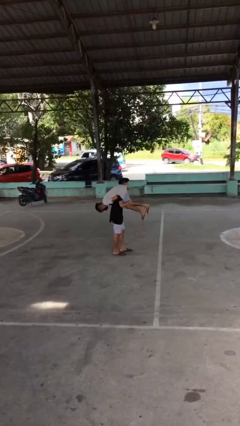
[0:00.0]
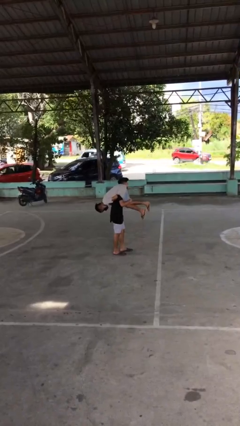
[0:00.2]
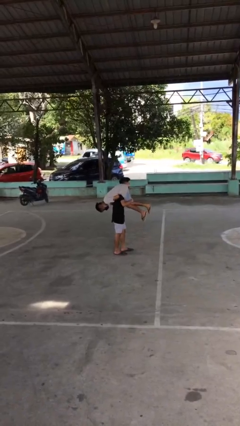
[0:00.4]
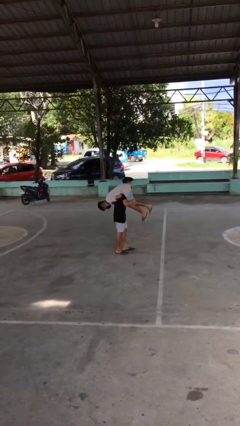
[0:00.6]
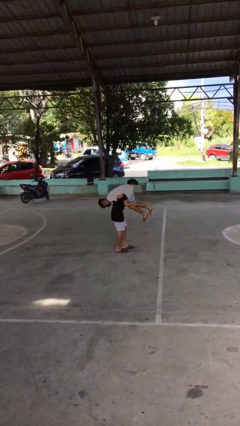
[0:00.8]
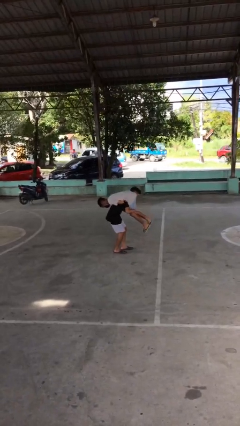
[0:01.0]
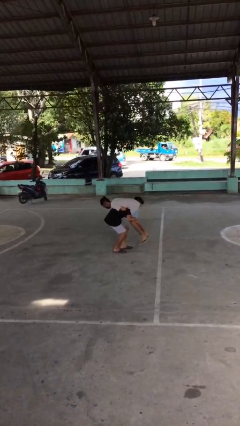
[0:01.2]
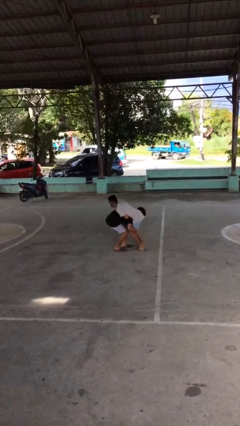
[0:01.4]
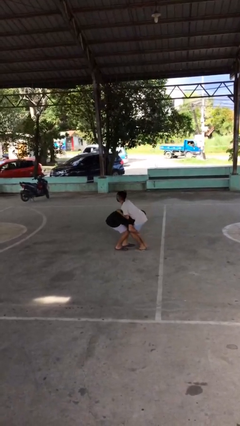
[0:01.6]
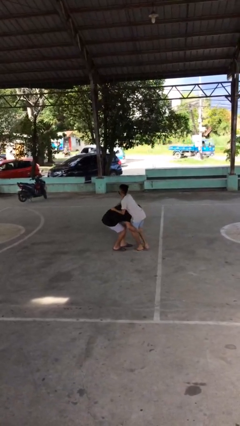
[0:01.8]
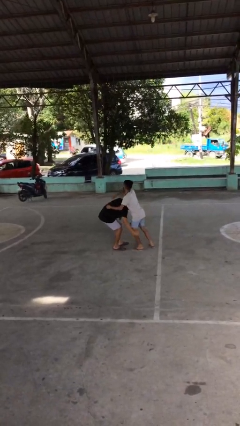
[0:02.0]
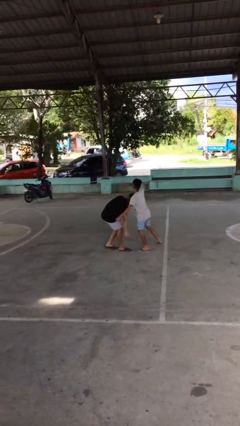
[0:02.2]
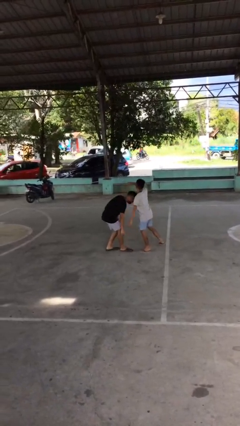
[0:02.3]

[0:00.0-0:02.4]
person puts down person

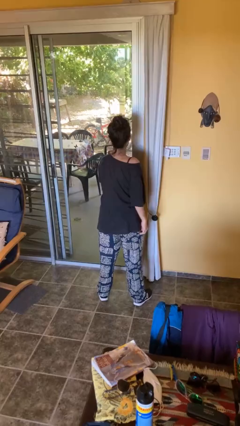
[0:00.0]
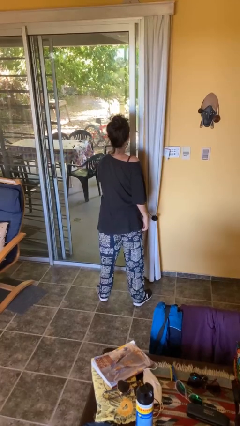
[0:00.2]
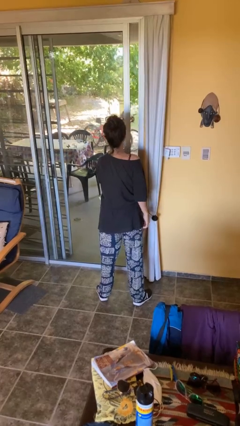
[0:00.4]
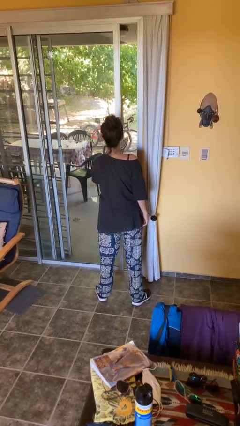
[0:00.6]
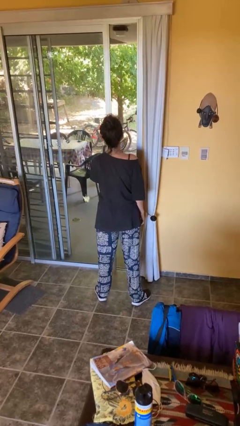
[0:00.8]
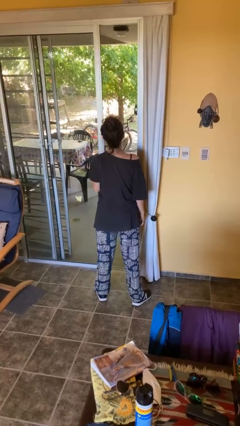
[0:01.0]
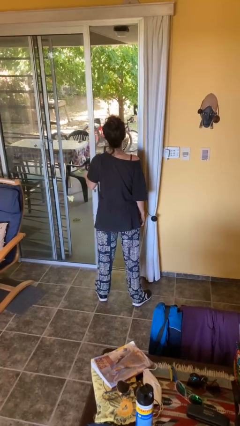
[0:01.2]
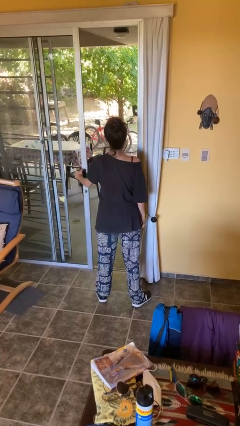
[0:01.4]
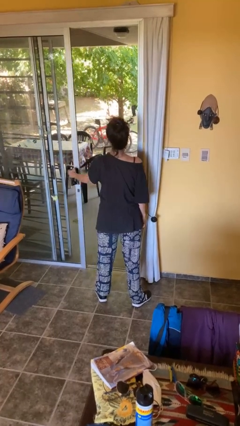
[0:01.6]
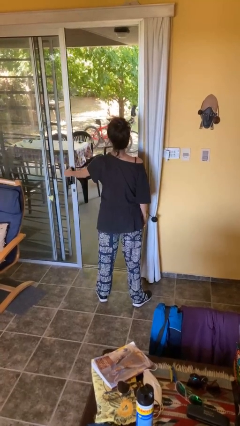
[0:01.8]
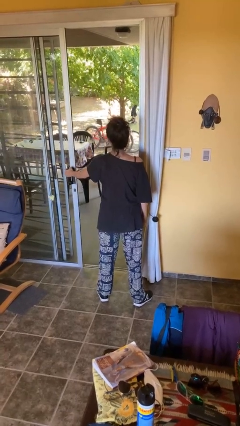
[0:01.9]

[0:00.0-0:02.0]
person opens facility door

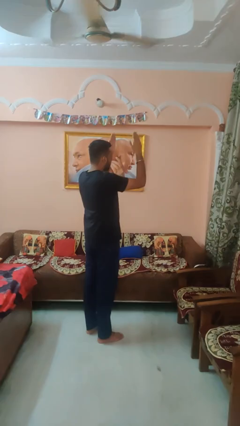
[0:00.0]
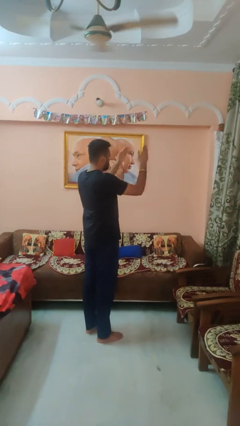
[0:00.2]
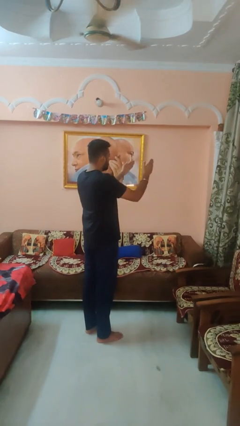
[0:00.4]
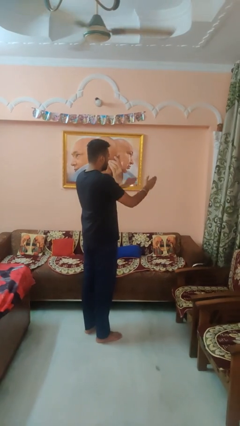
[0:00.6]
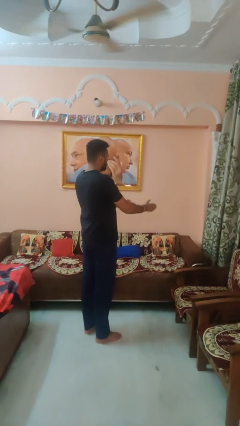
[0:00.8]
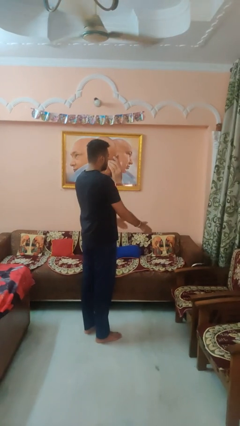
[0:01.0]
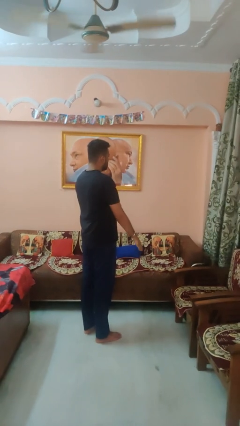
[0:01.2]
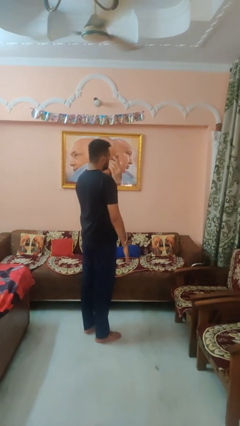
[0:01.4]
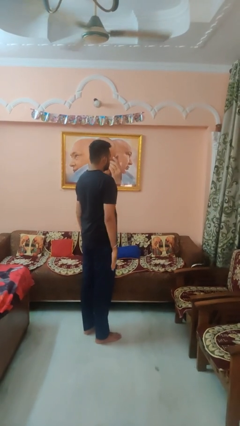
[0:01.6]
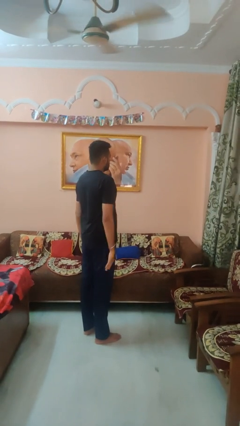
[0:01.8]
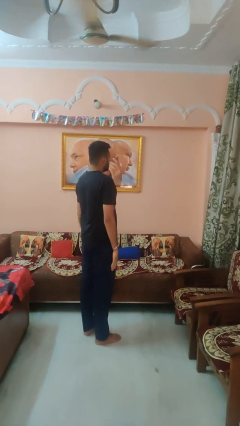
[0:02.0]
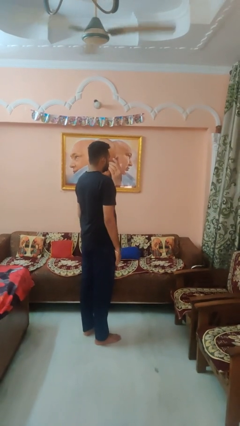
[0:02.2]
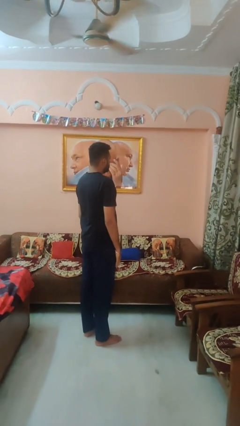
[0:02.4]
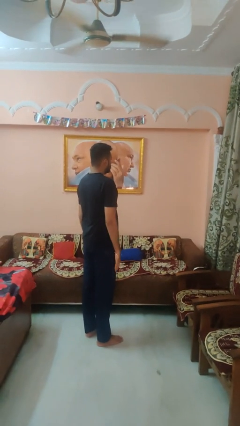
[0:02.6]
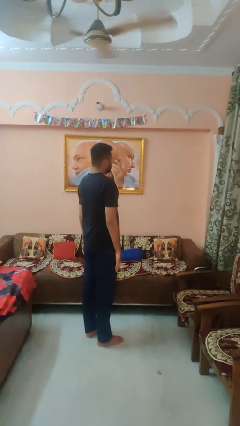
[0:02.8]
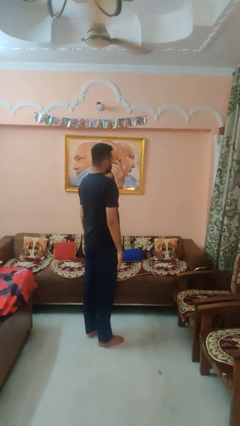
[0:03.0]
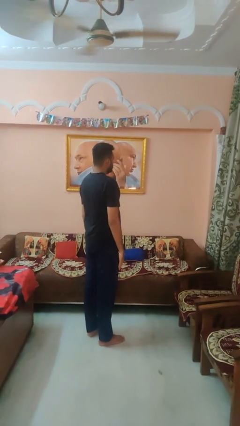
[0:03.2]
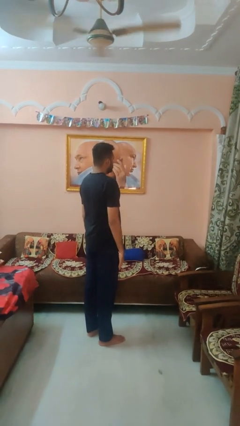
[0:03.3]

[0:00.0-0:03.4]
person gestures swipe down

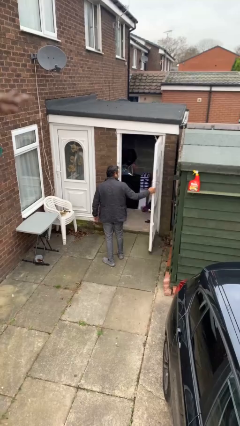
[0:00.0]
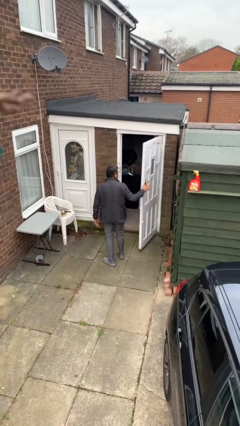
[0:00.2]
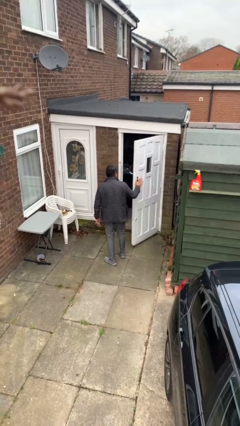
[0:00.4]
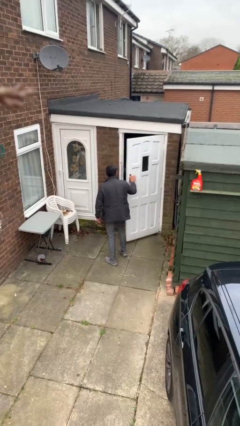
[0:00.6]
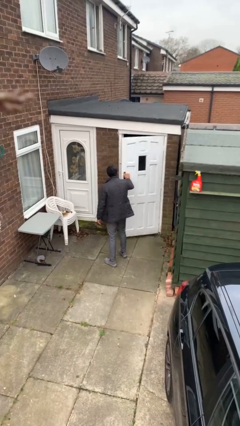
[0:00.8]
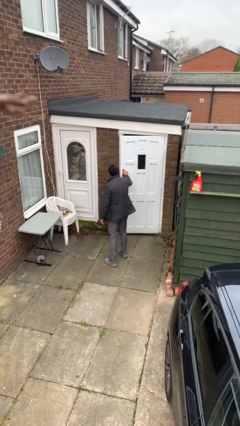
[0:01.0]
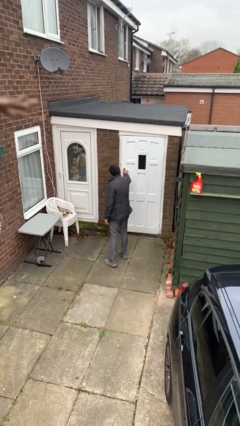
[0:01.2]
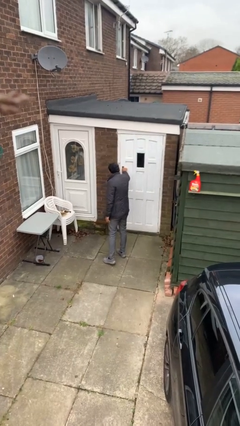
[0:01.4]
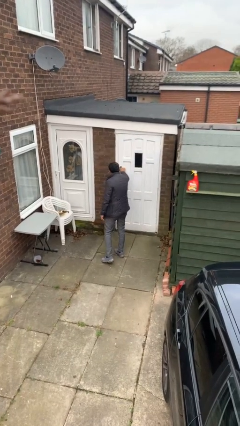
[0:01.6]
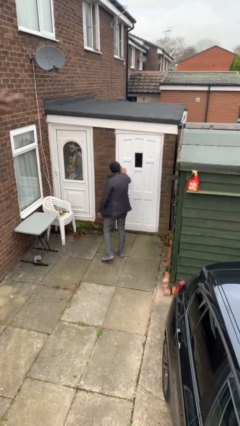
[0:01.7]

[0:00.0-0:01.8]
person closes facility door

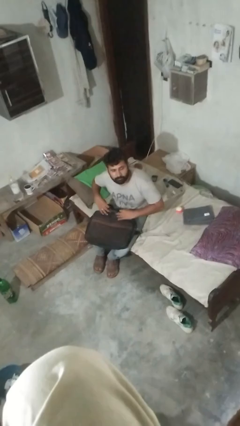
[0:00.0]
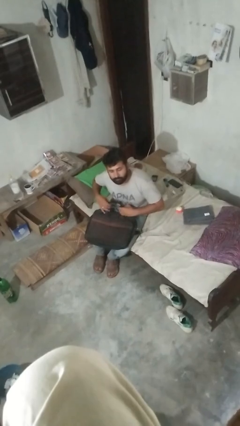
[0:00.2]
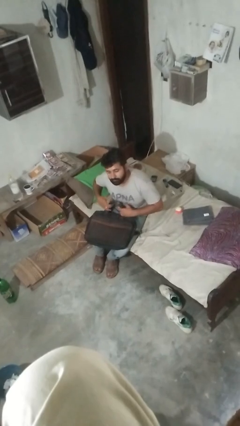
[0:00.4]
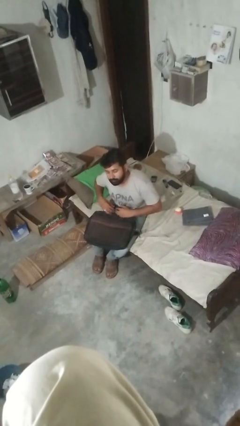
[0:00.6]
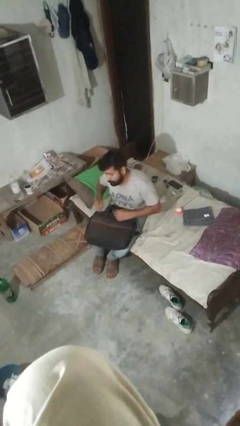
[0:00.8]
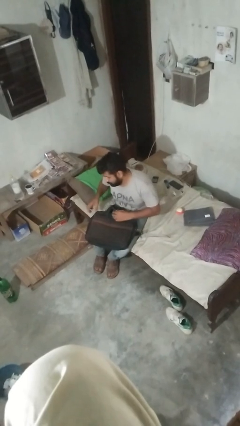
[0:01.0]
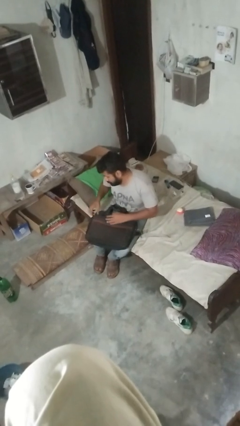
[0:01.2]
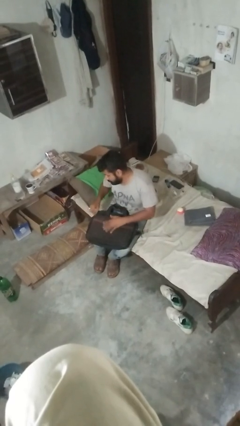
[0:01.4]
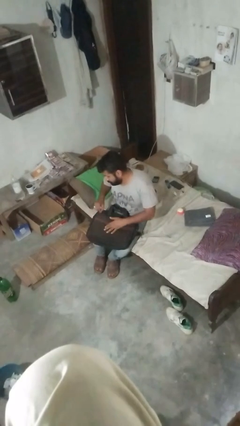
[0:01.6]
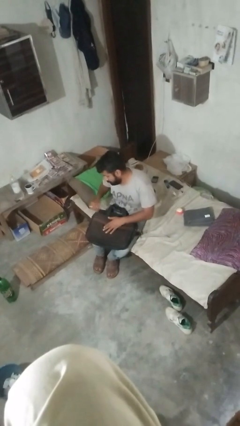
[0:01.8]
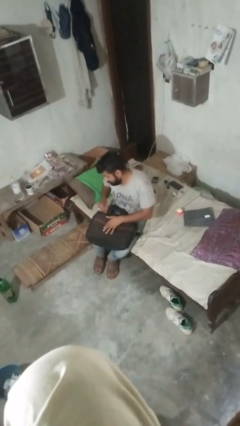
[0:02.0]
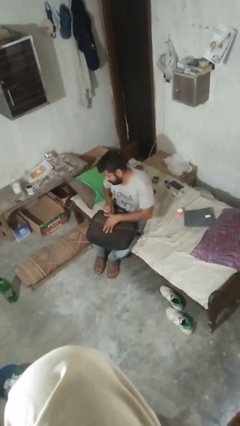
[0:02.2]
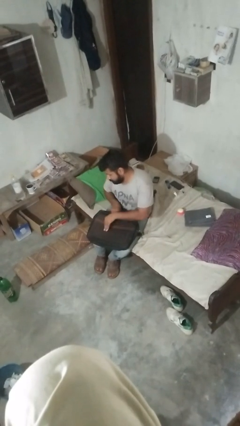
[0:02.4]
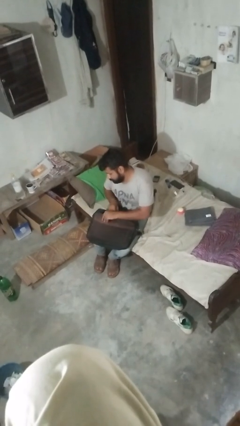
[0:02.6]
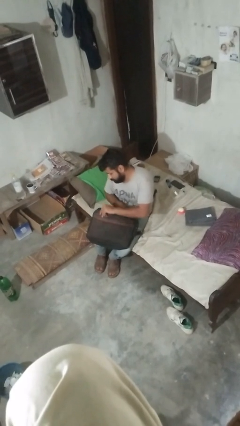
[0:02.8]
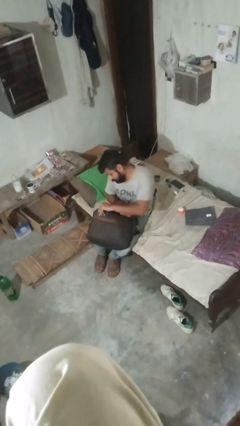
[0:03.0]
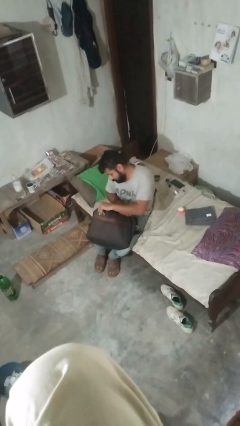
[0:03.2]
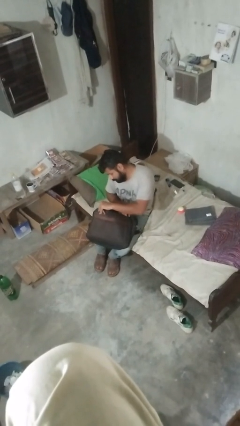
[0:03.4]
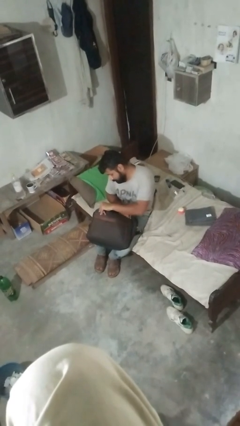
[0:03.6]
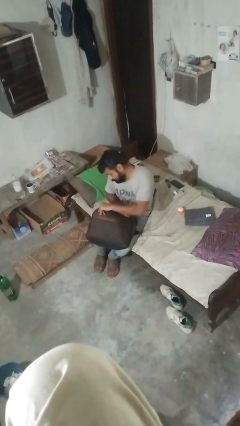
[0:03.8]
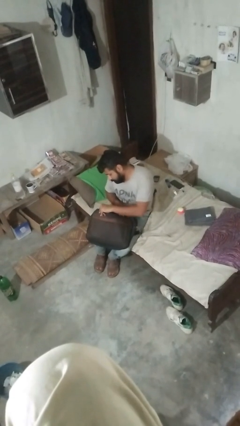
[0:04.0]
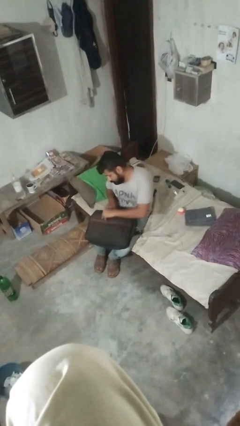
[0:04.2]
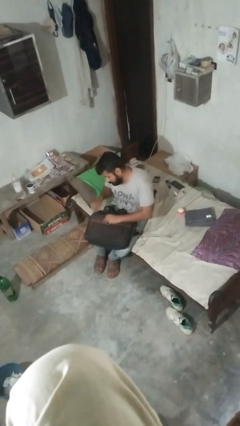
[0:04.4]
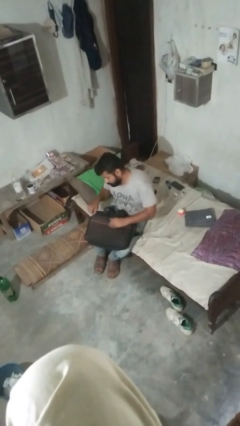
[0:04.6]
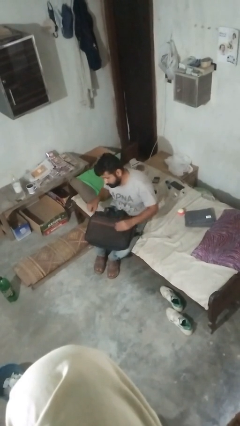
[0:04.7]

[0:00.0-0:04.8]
person searches in bag

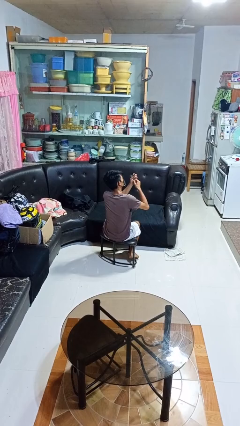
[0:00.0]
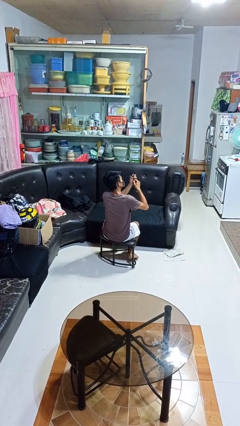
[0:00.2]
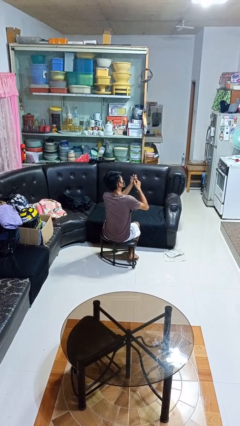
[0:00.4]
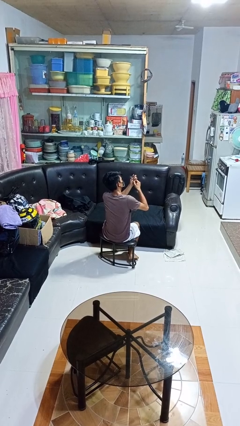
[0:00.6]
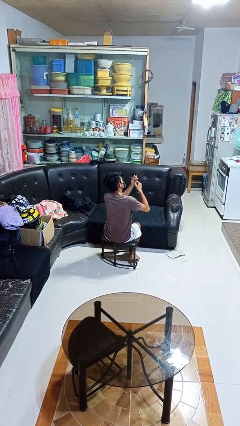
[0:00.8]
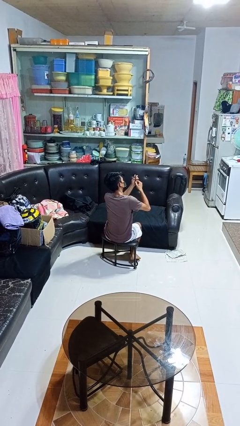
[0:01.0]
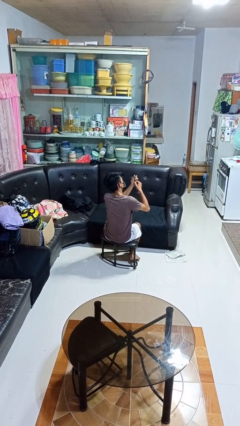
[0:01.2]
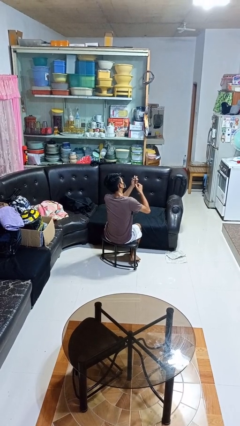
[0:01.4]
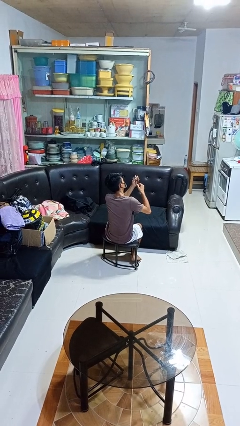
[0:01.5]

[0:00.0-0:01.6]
person files fingernails

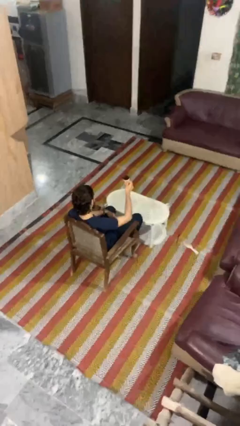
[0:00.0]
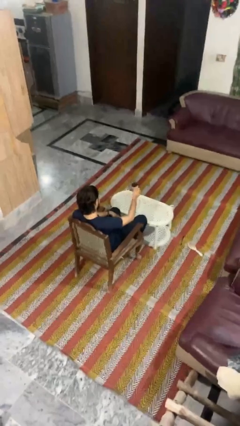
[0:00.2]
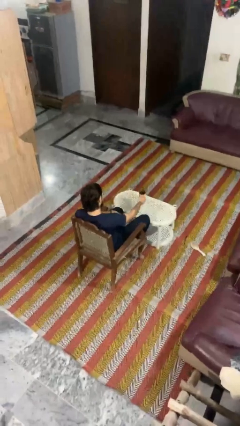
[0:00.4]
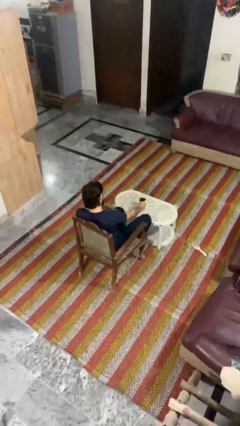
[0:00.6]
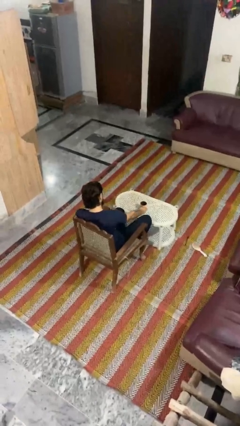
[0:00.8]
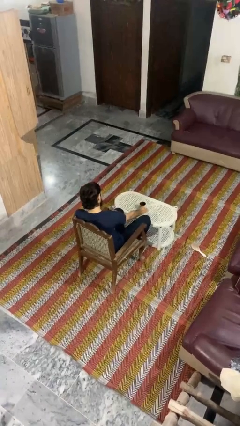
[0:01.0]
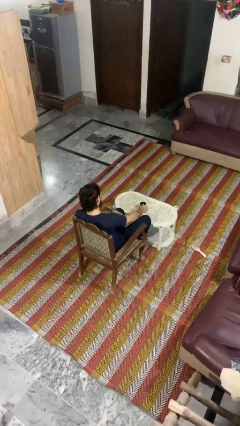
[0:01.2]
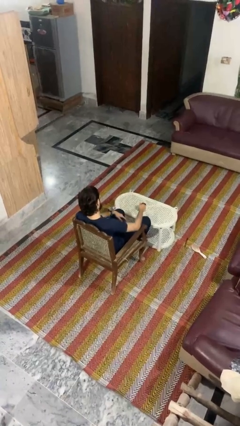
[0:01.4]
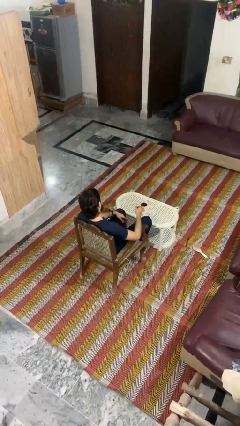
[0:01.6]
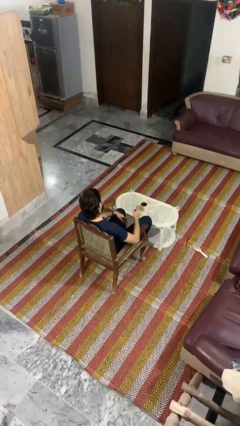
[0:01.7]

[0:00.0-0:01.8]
person puts down object on table
